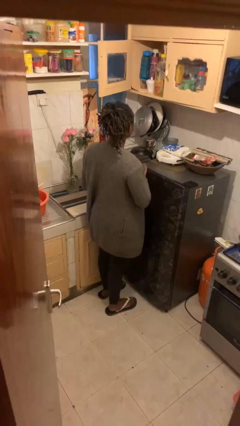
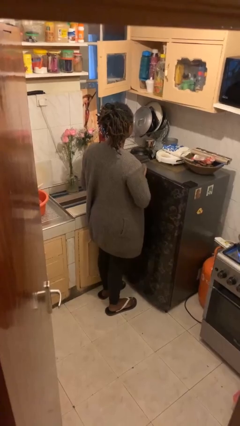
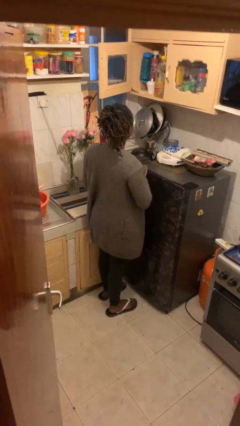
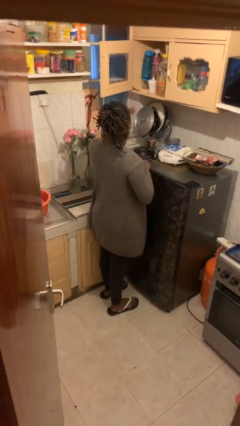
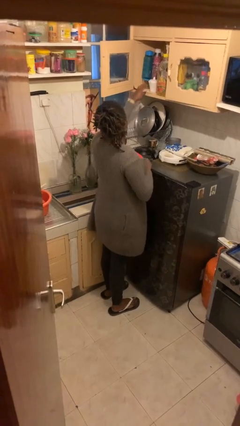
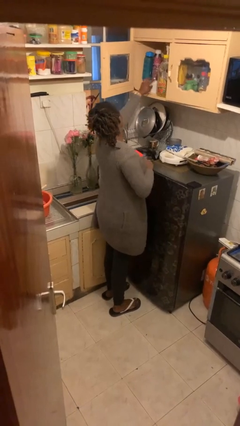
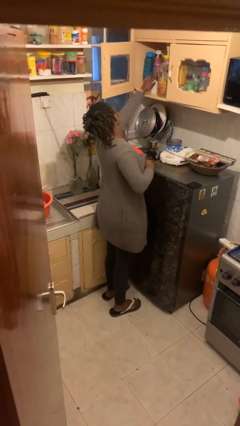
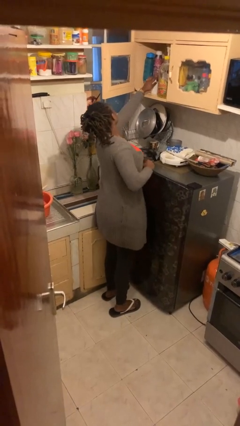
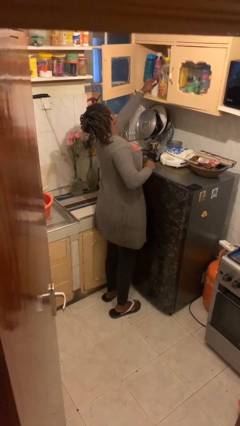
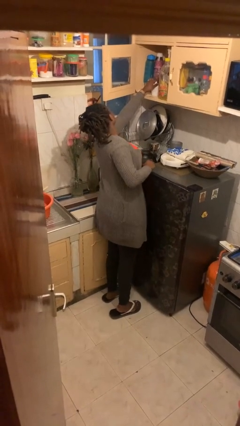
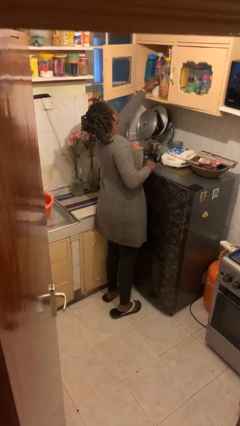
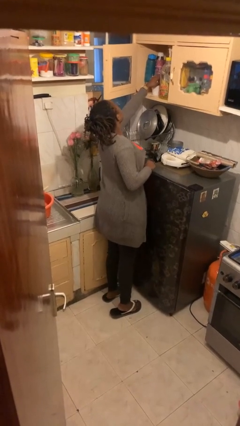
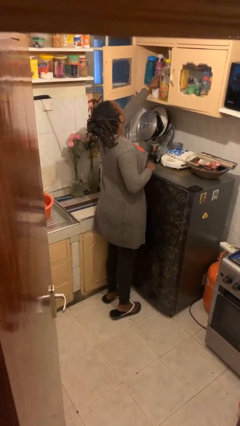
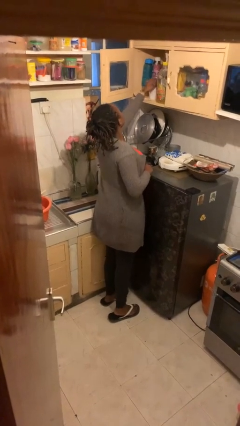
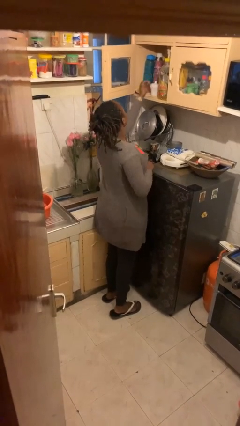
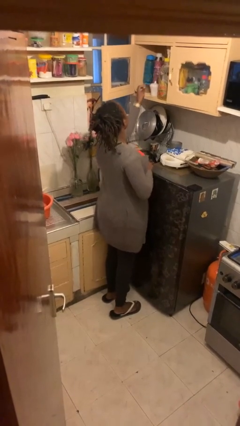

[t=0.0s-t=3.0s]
person searches in cabinet

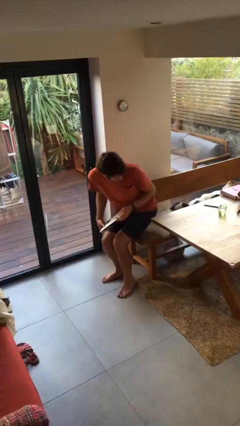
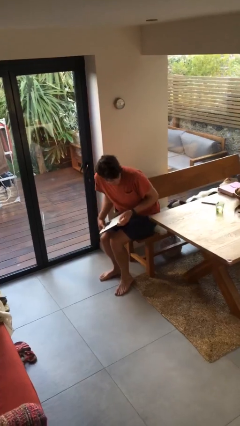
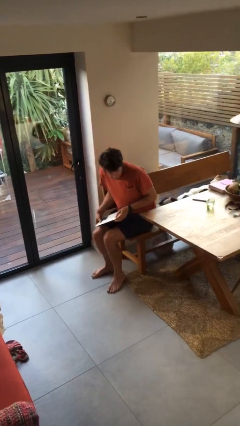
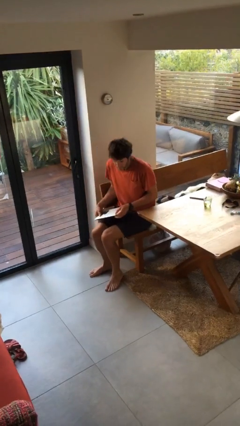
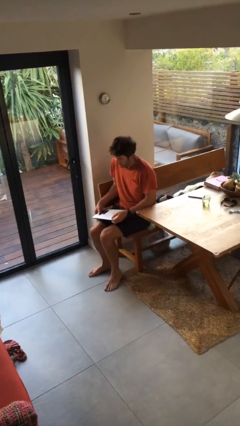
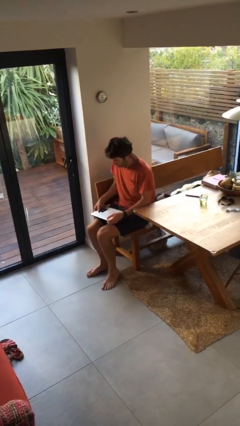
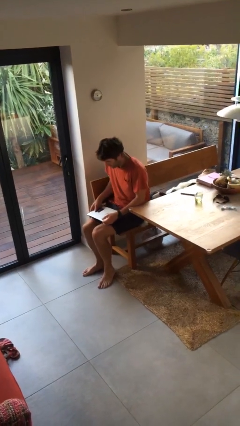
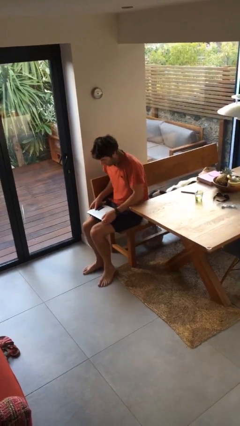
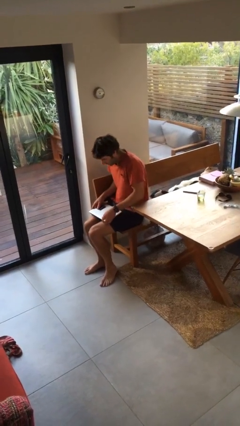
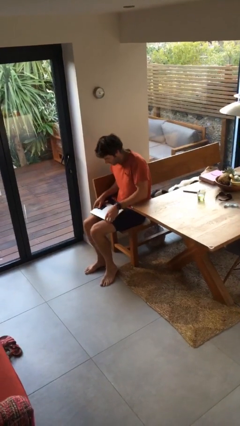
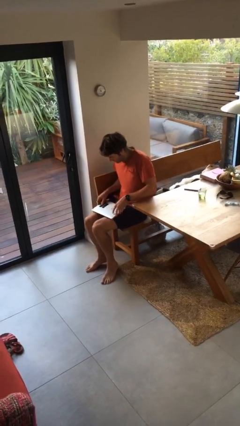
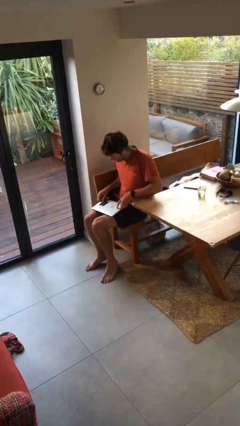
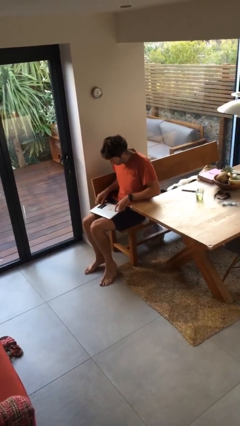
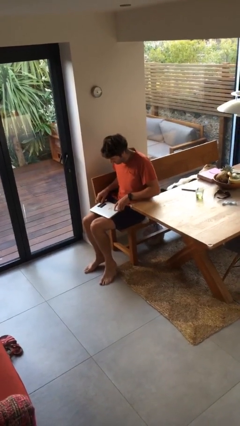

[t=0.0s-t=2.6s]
person sits down

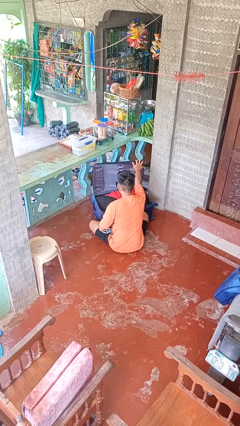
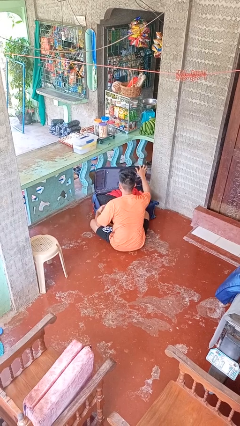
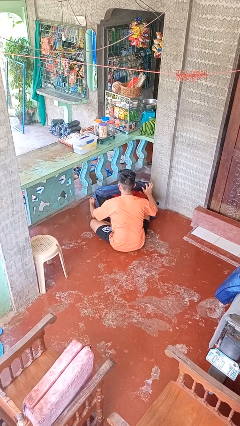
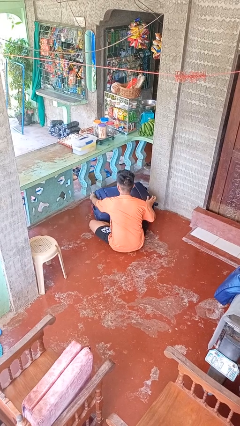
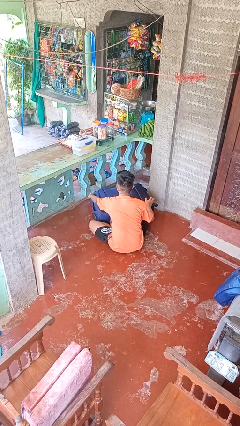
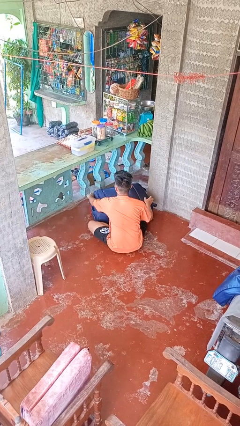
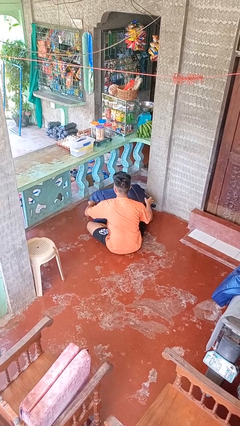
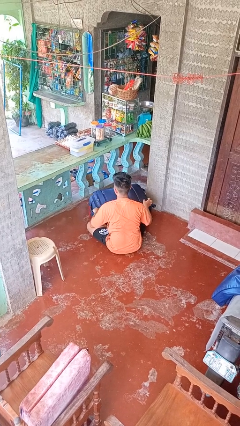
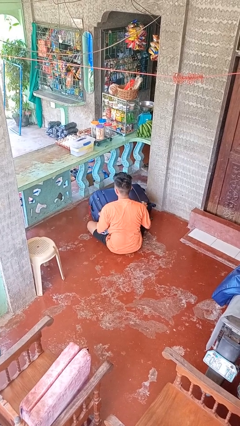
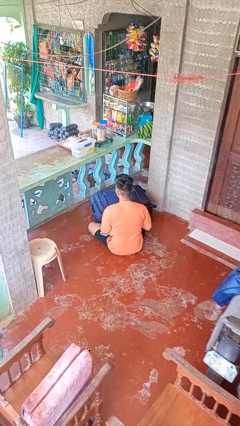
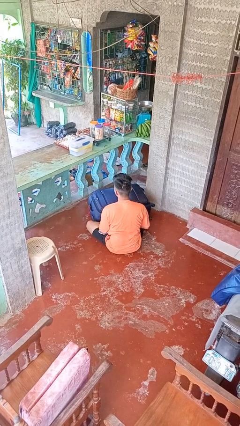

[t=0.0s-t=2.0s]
person closes suitcase

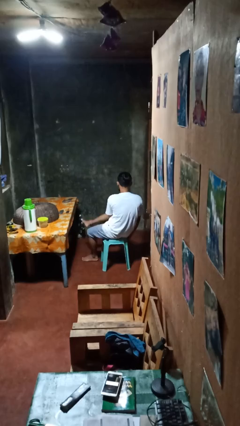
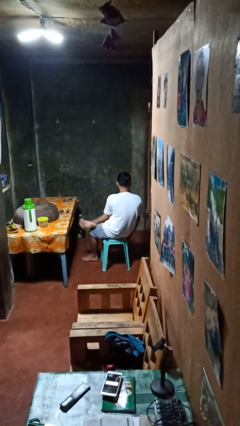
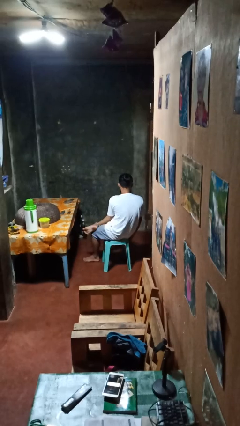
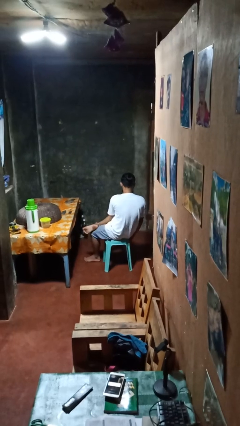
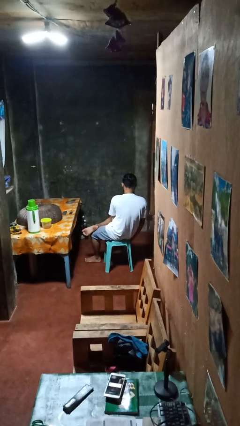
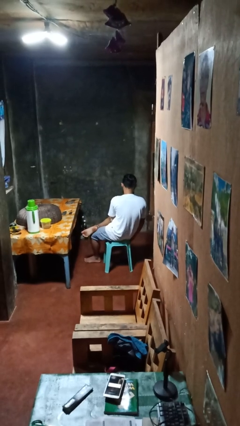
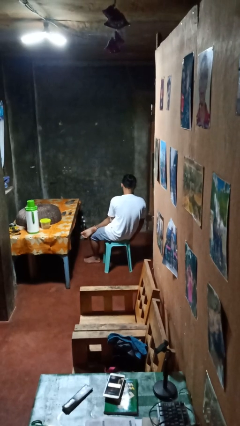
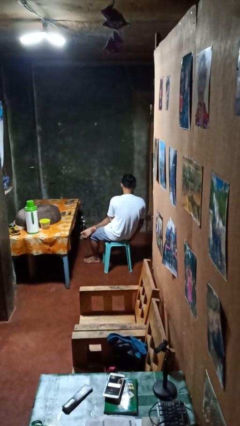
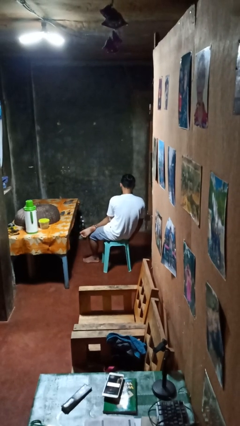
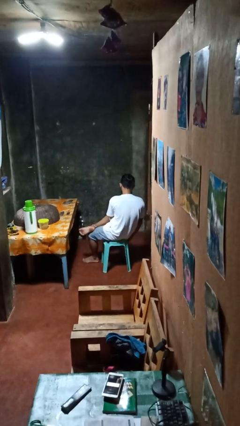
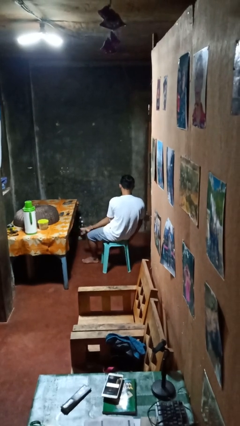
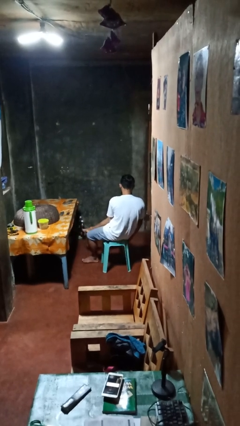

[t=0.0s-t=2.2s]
person crosses legs

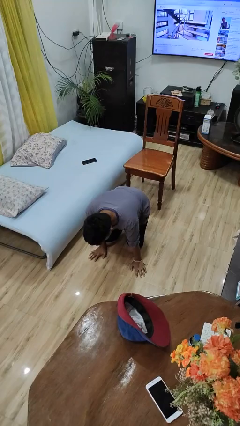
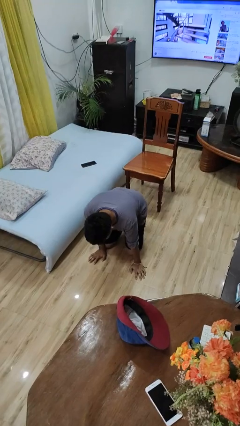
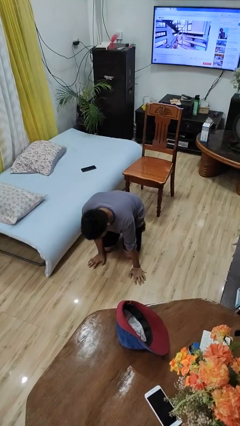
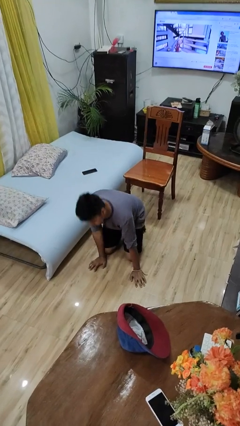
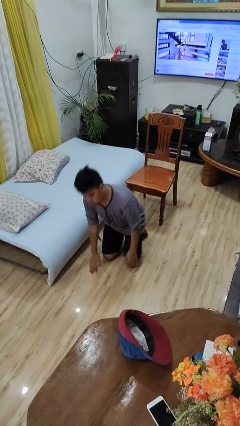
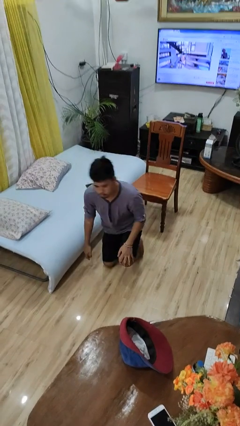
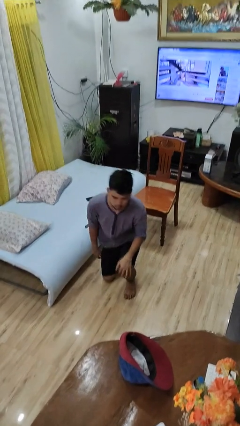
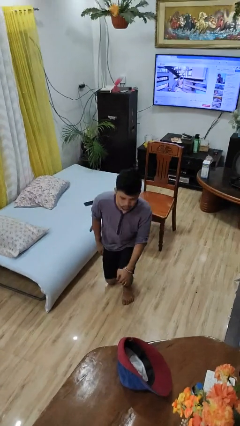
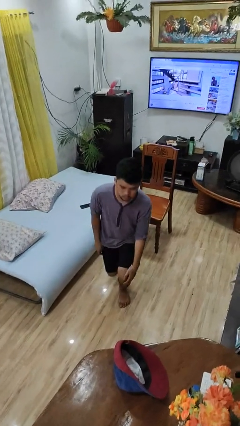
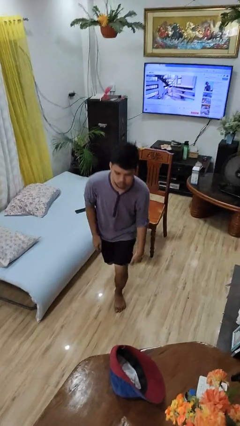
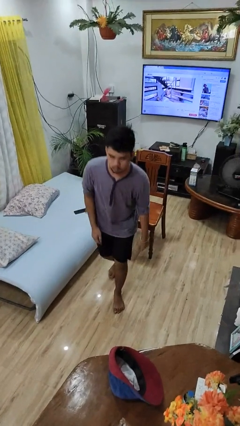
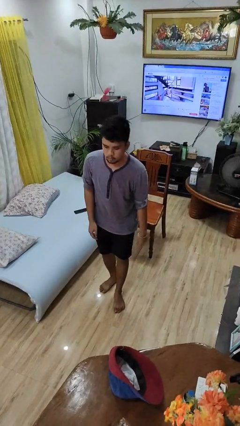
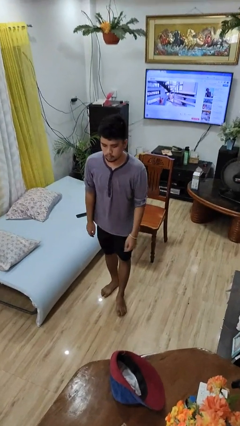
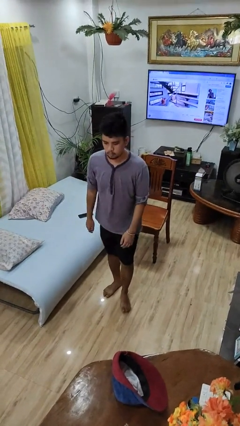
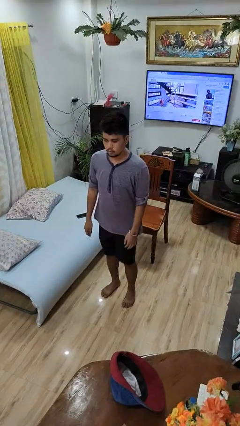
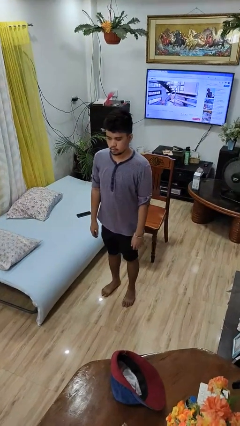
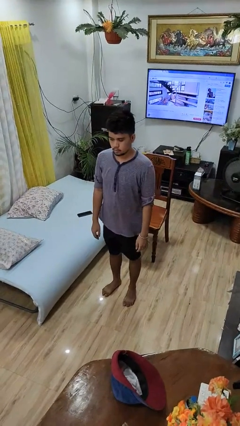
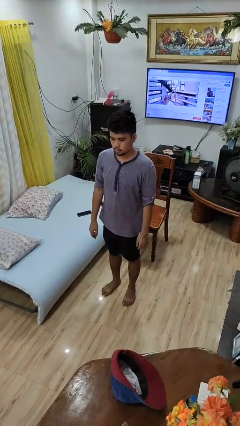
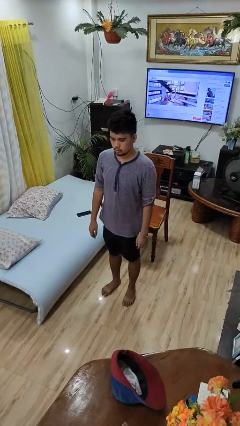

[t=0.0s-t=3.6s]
person stands up from floor

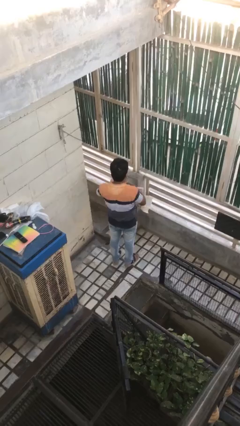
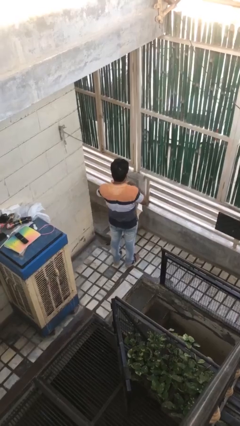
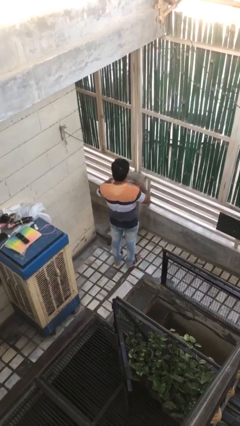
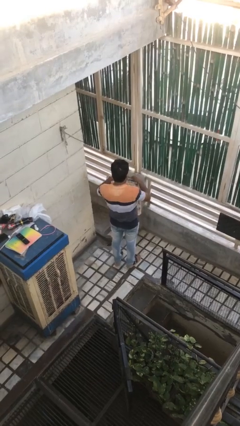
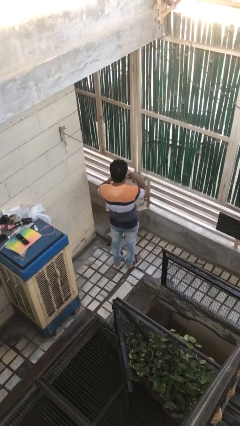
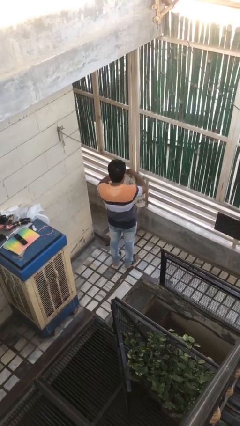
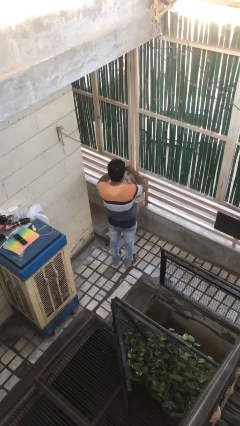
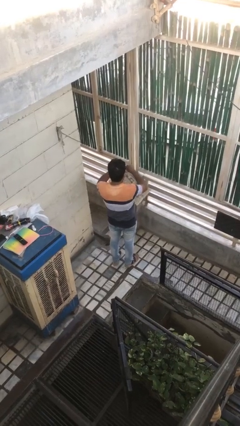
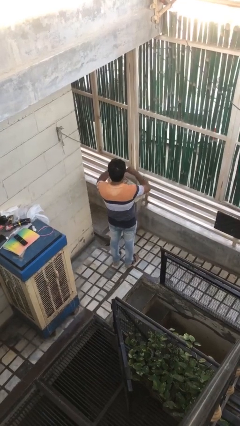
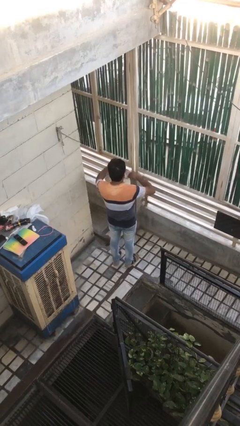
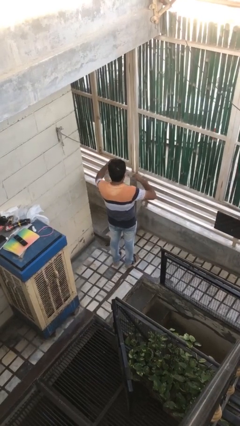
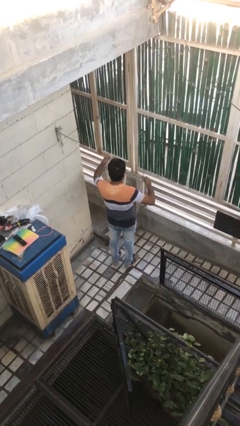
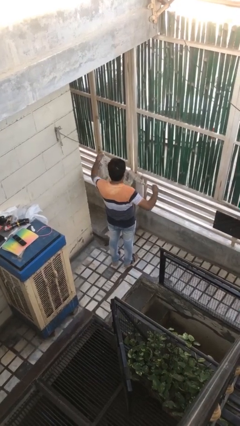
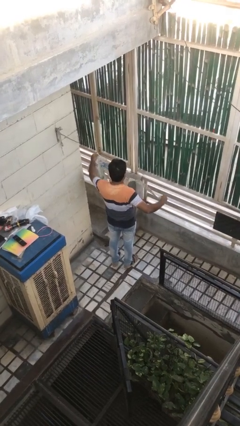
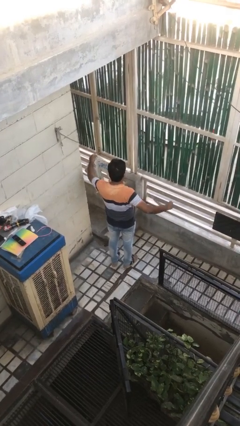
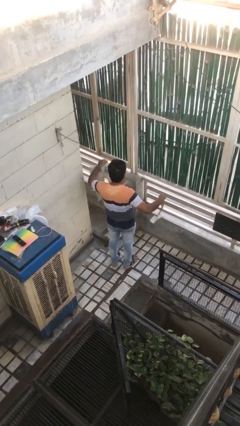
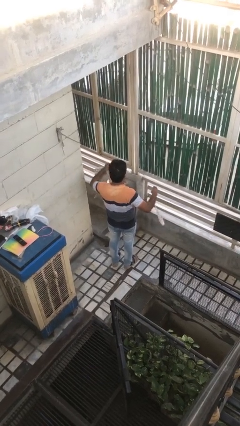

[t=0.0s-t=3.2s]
person tears paper

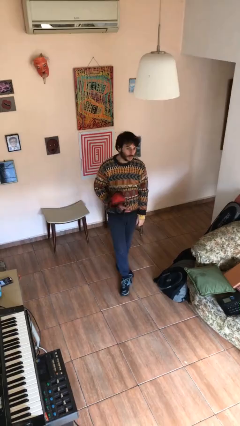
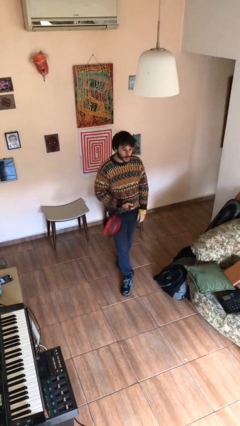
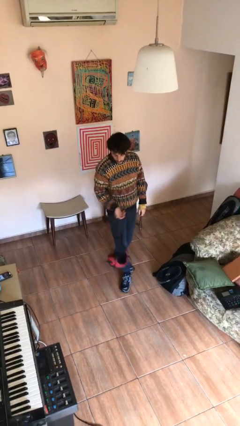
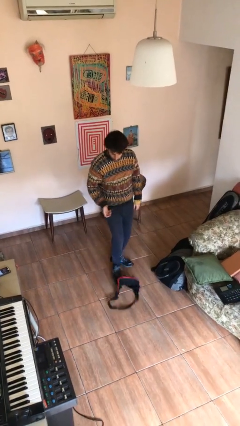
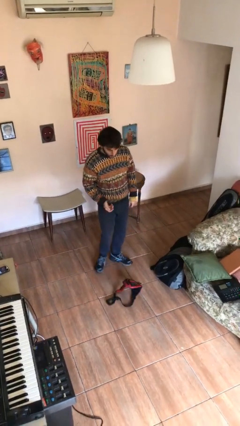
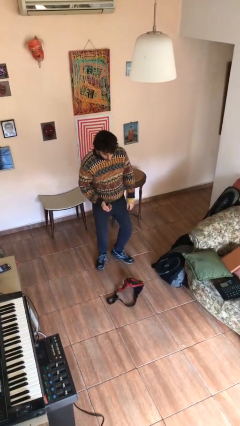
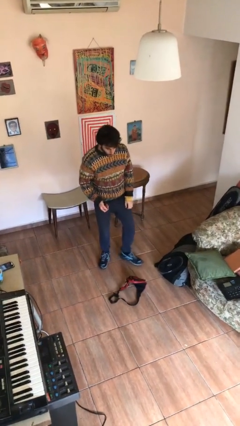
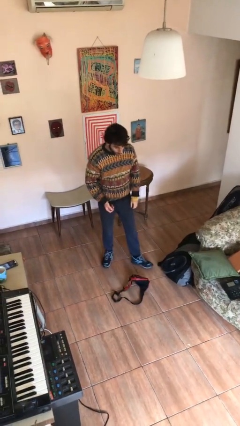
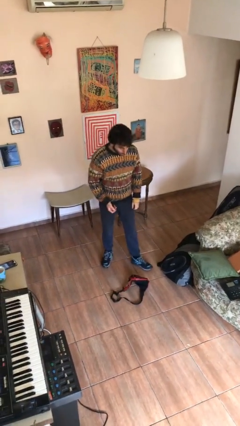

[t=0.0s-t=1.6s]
person drops object
